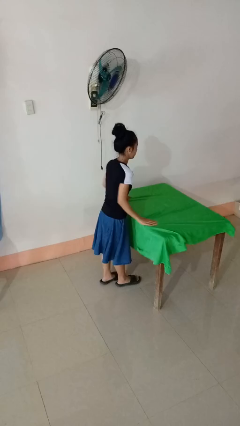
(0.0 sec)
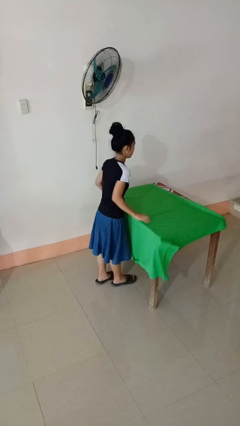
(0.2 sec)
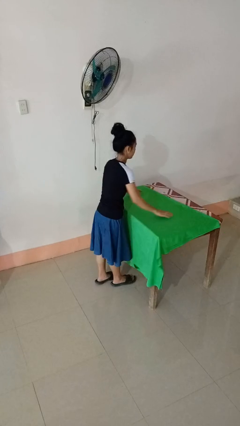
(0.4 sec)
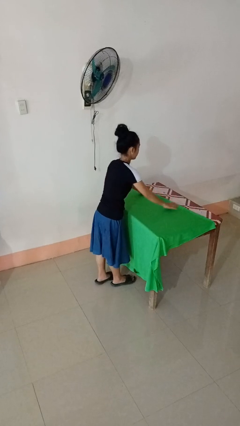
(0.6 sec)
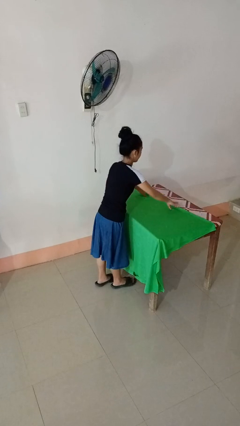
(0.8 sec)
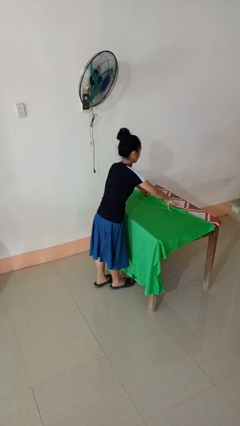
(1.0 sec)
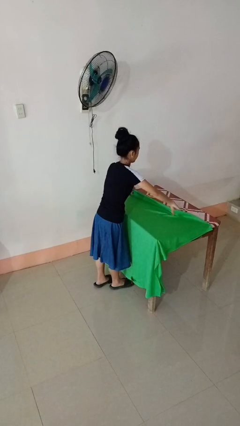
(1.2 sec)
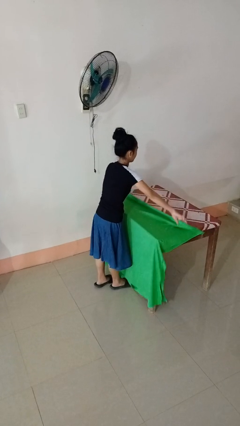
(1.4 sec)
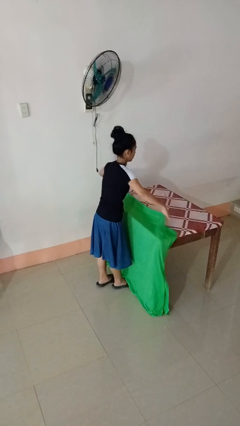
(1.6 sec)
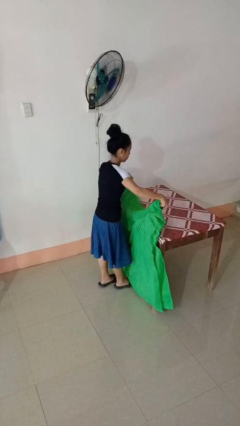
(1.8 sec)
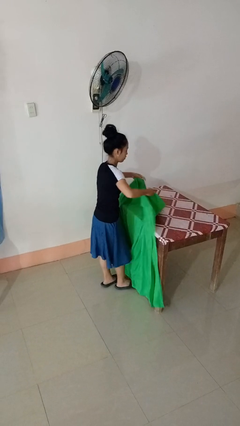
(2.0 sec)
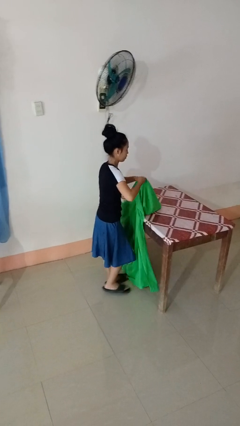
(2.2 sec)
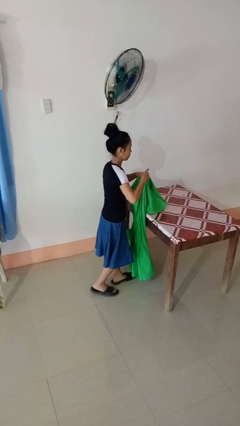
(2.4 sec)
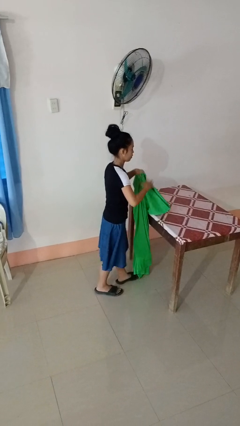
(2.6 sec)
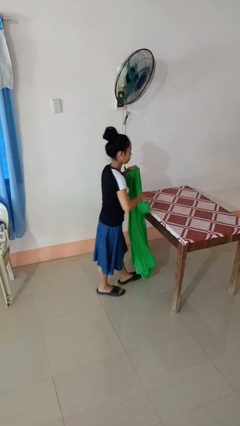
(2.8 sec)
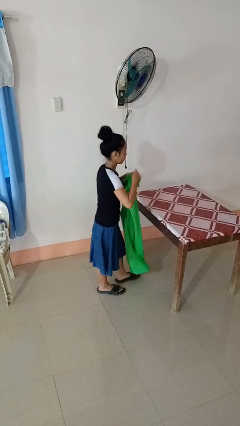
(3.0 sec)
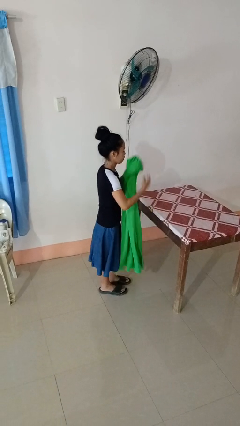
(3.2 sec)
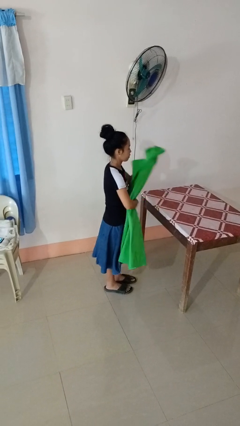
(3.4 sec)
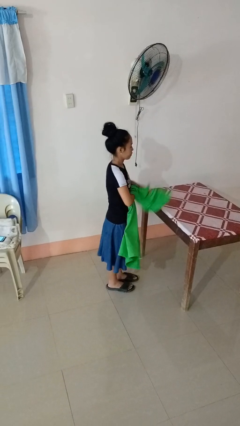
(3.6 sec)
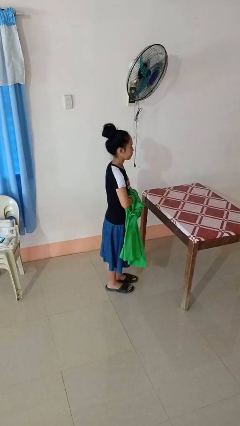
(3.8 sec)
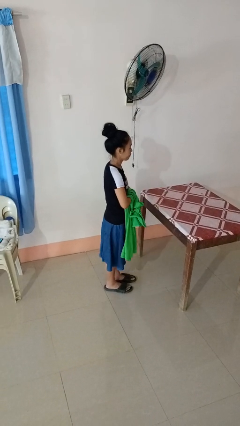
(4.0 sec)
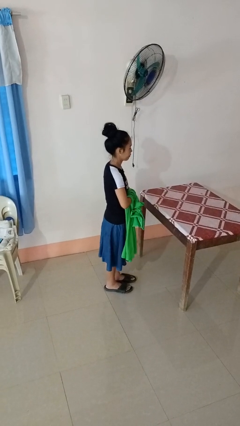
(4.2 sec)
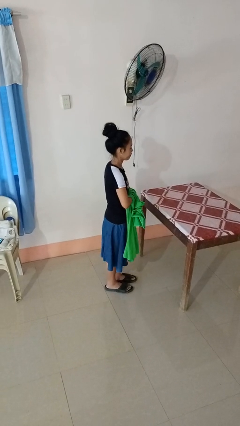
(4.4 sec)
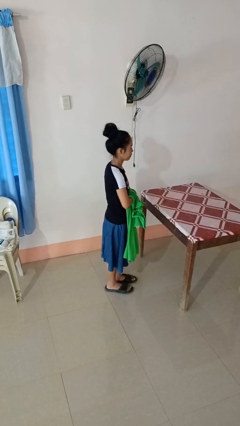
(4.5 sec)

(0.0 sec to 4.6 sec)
person folds tablecloth

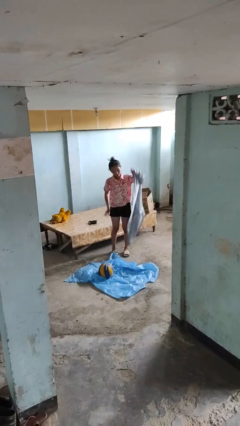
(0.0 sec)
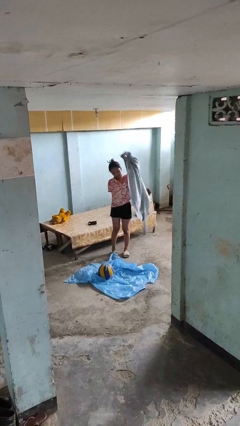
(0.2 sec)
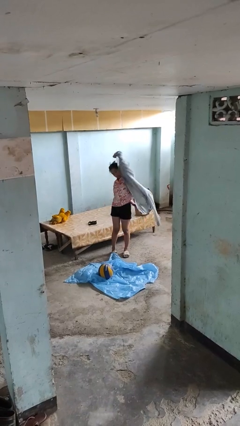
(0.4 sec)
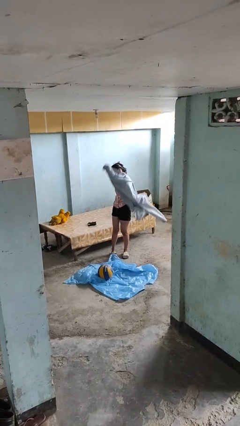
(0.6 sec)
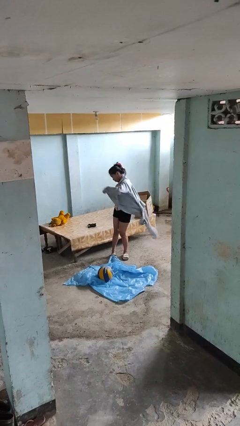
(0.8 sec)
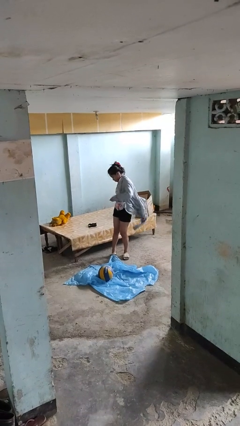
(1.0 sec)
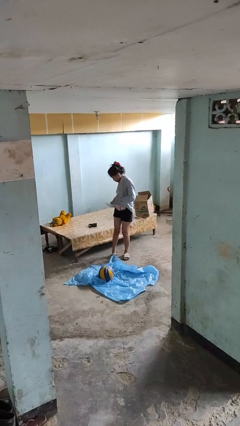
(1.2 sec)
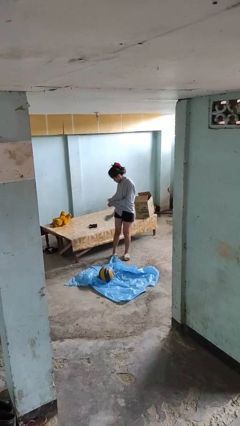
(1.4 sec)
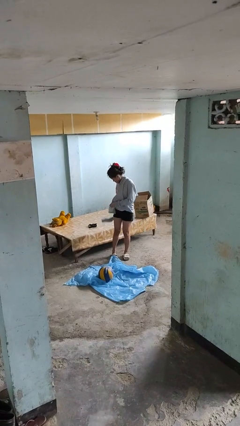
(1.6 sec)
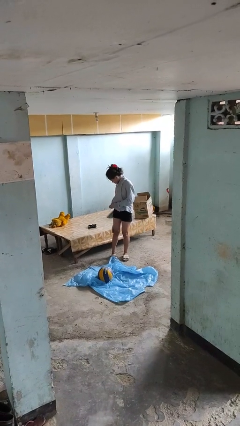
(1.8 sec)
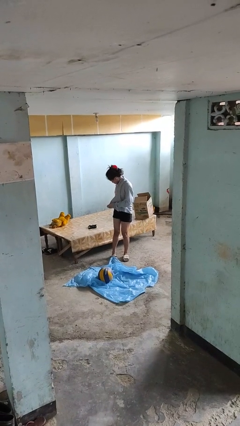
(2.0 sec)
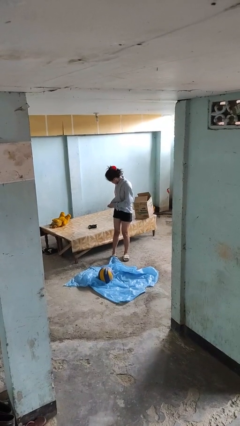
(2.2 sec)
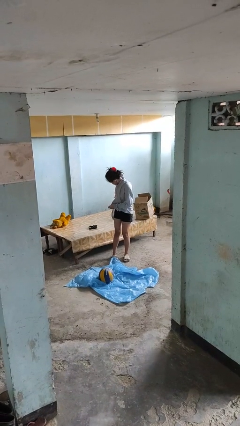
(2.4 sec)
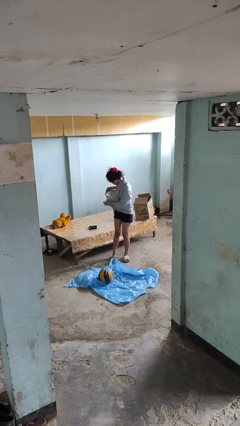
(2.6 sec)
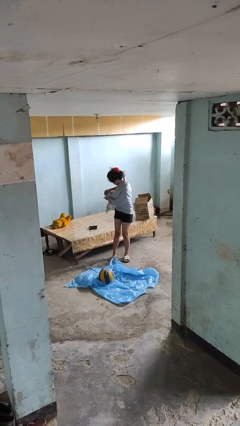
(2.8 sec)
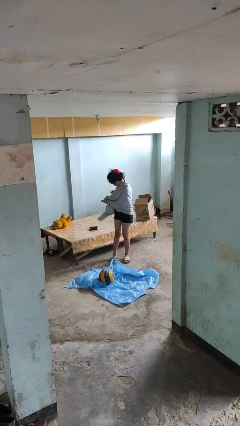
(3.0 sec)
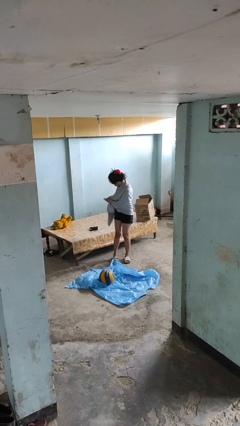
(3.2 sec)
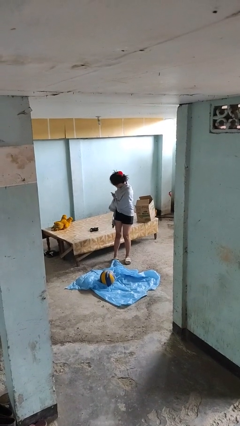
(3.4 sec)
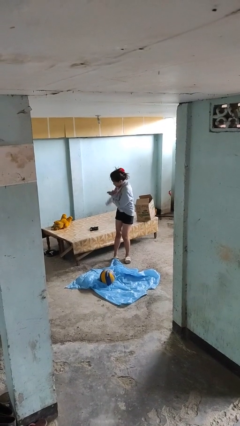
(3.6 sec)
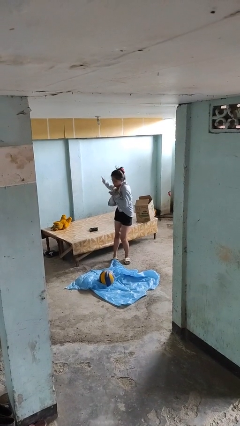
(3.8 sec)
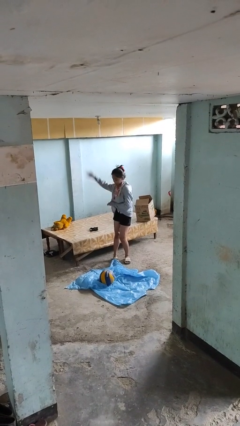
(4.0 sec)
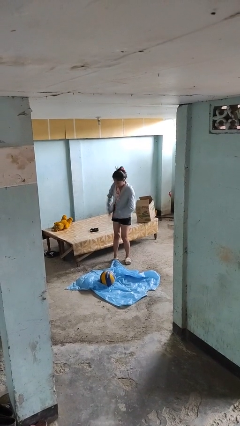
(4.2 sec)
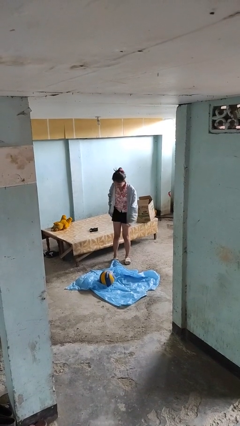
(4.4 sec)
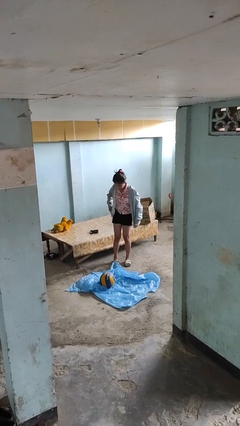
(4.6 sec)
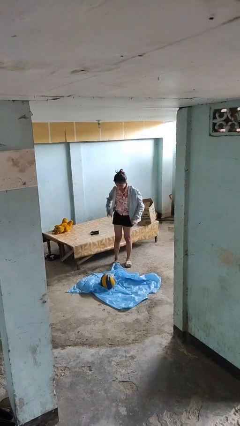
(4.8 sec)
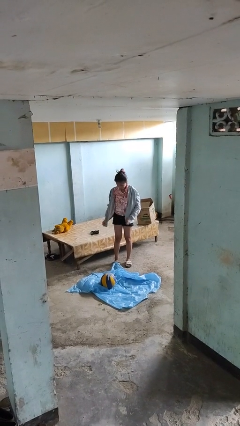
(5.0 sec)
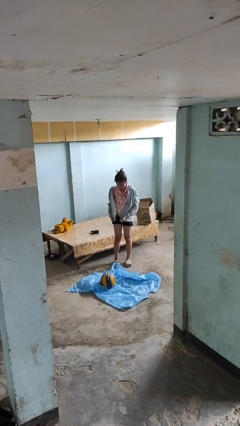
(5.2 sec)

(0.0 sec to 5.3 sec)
person puts on jacket

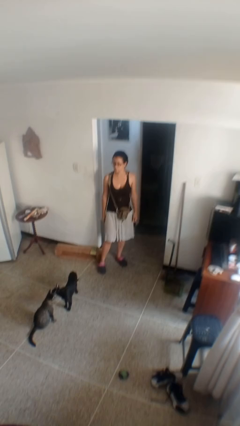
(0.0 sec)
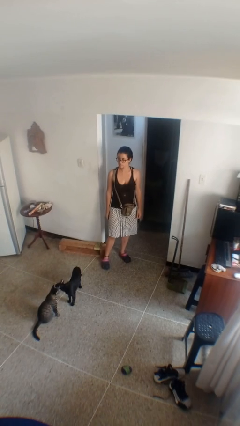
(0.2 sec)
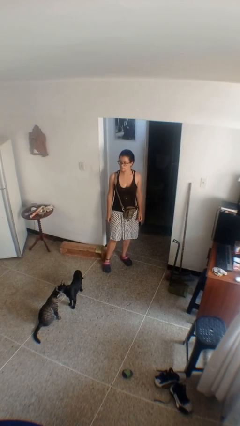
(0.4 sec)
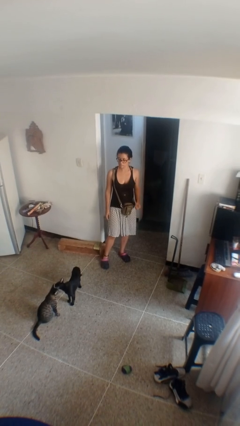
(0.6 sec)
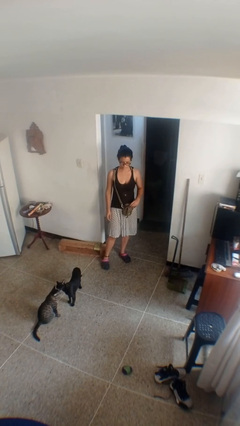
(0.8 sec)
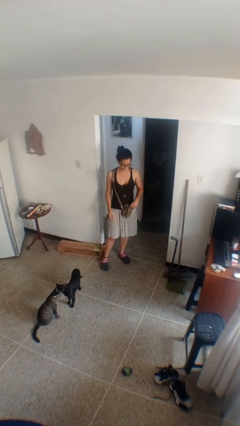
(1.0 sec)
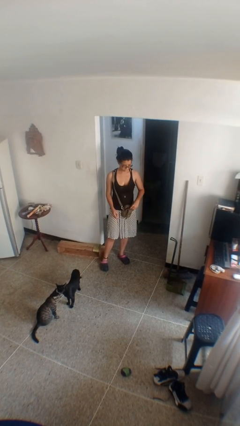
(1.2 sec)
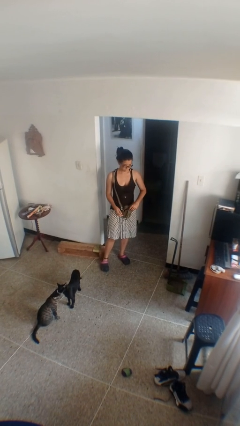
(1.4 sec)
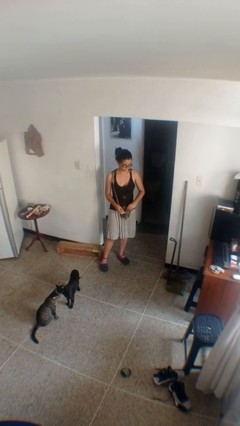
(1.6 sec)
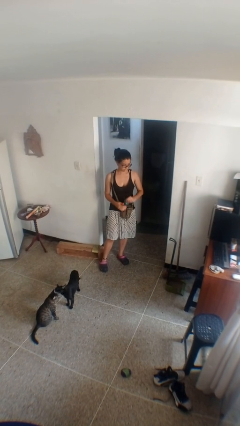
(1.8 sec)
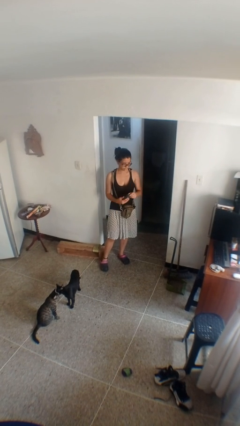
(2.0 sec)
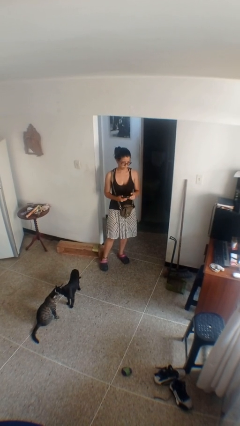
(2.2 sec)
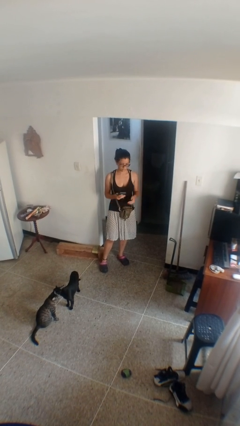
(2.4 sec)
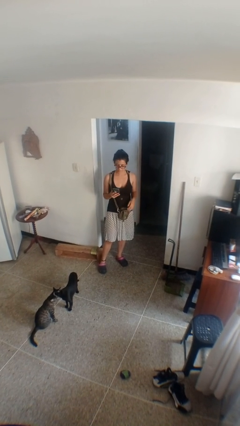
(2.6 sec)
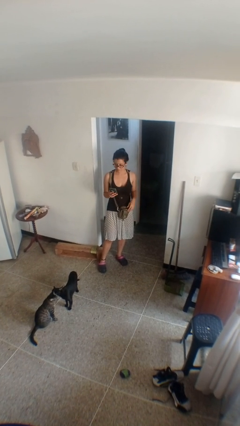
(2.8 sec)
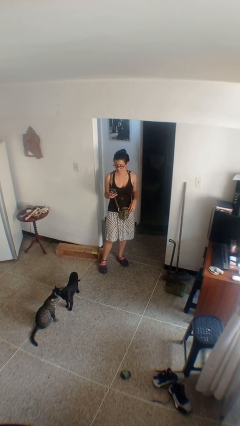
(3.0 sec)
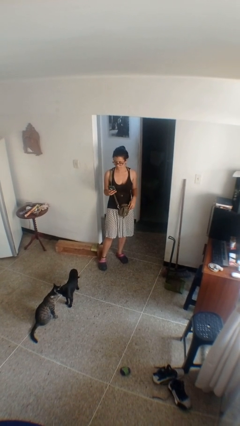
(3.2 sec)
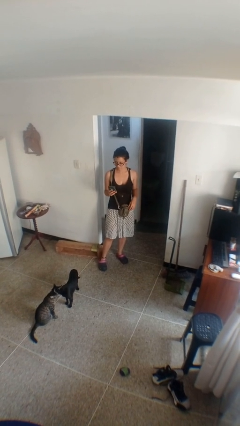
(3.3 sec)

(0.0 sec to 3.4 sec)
person takes phone from pocket

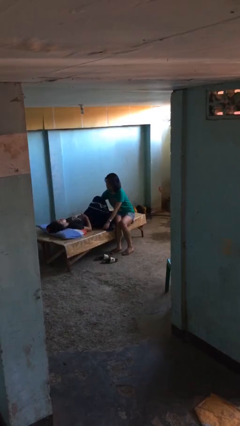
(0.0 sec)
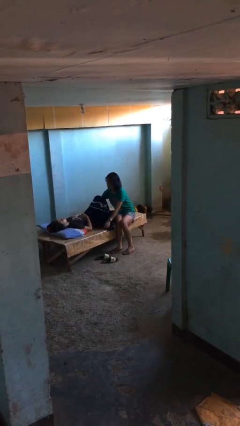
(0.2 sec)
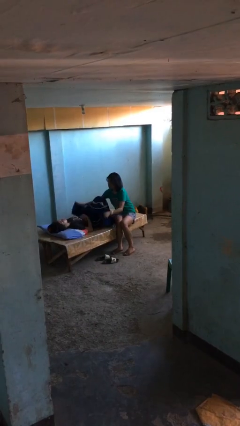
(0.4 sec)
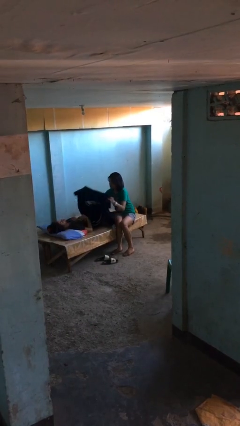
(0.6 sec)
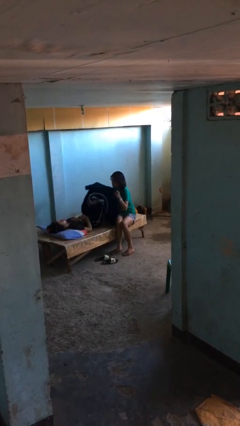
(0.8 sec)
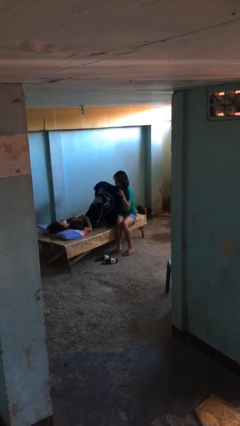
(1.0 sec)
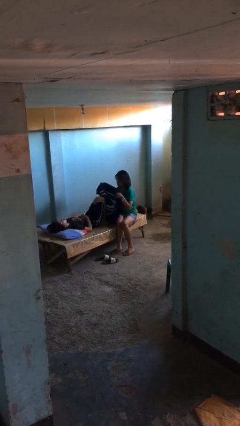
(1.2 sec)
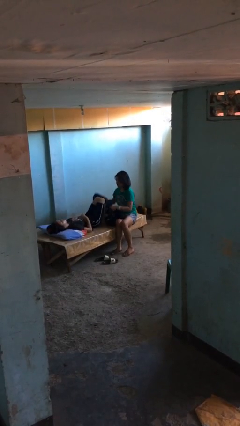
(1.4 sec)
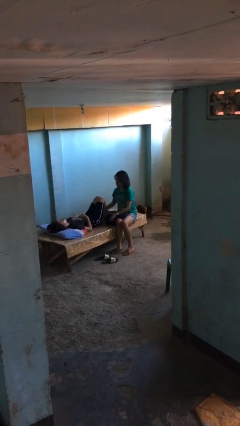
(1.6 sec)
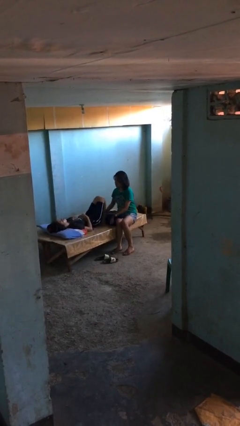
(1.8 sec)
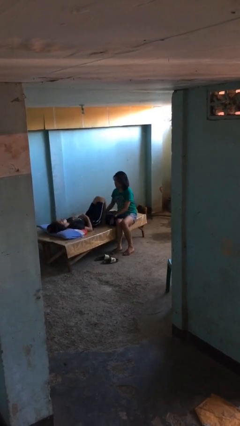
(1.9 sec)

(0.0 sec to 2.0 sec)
person uncovers friend with blanket

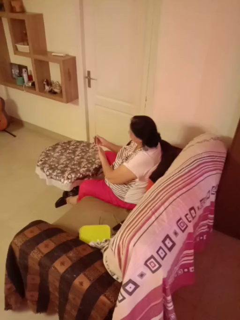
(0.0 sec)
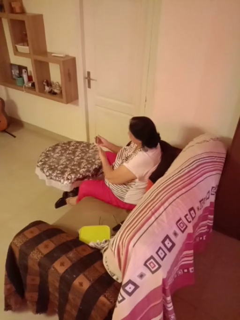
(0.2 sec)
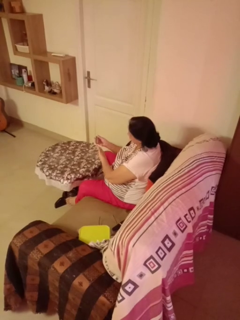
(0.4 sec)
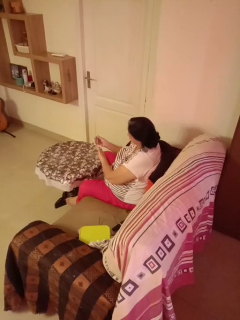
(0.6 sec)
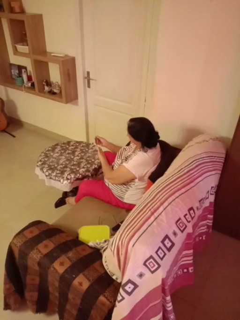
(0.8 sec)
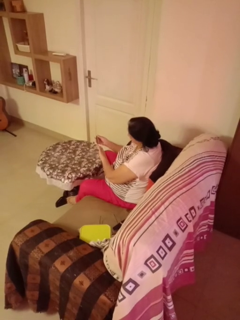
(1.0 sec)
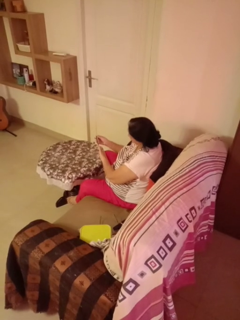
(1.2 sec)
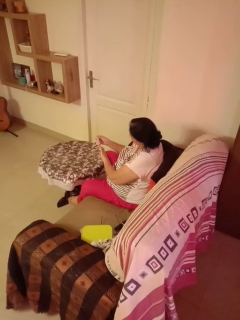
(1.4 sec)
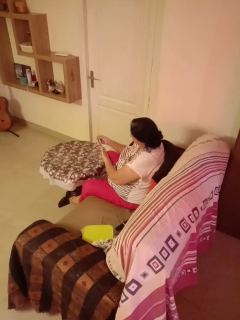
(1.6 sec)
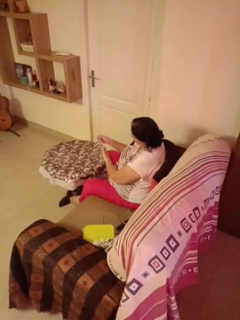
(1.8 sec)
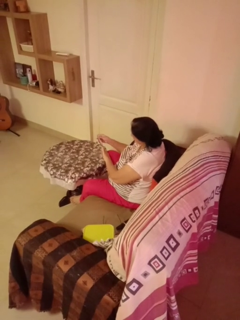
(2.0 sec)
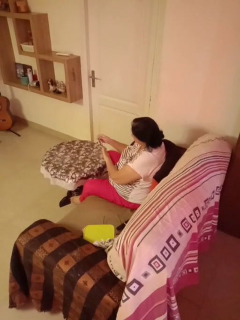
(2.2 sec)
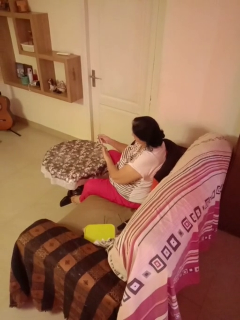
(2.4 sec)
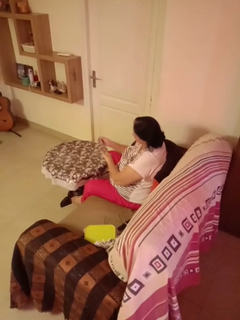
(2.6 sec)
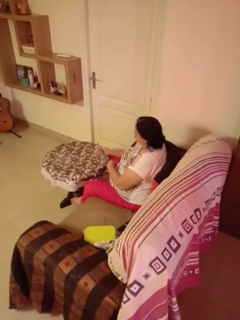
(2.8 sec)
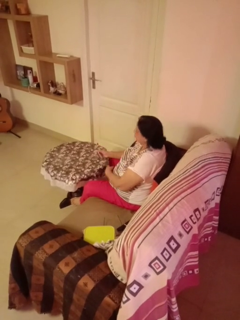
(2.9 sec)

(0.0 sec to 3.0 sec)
person clips fingernails
